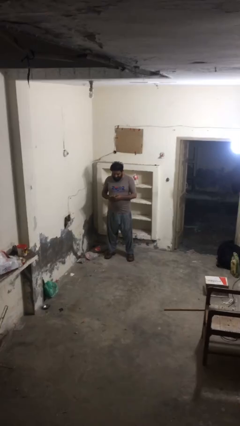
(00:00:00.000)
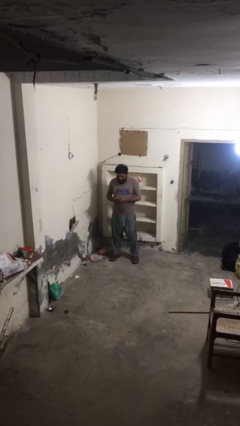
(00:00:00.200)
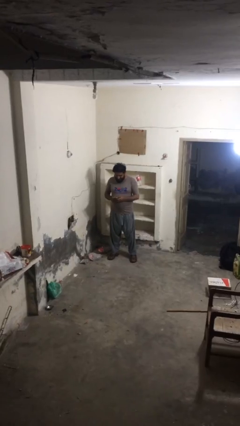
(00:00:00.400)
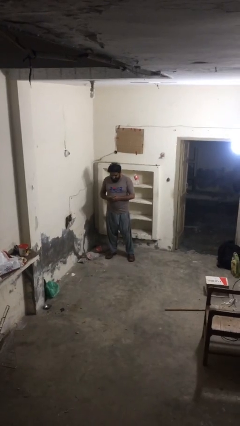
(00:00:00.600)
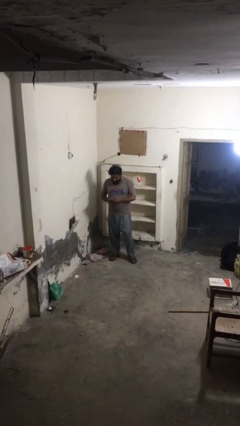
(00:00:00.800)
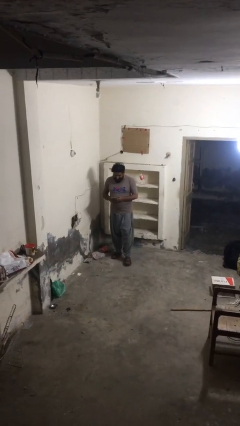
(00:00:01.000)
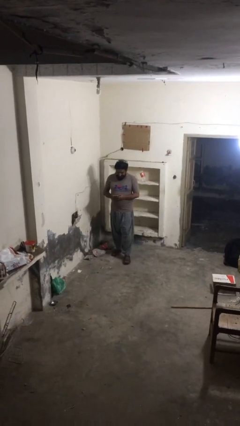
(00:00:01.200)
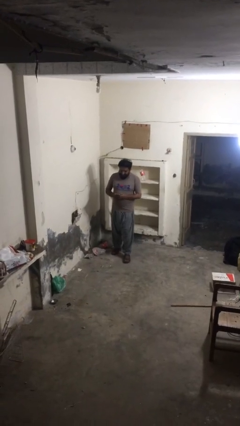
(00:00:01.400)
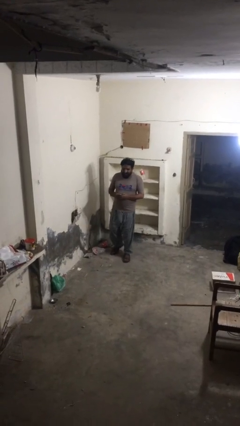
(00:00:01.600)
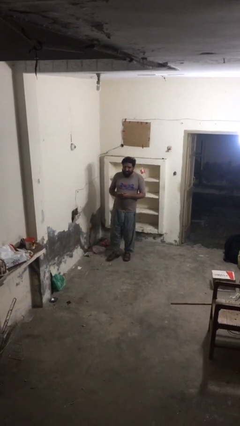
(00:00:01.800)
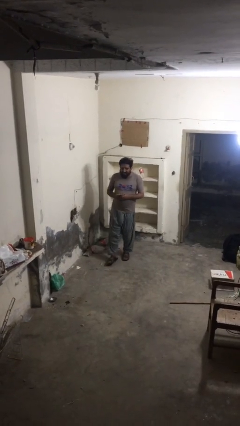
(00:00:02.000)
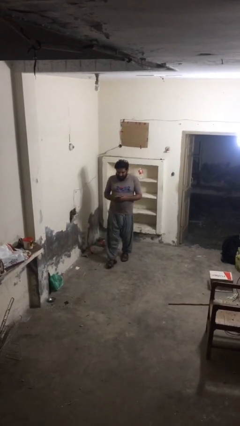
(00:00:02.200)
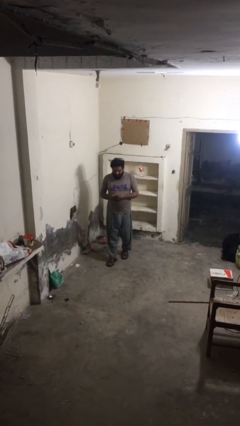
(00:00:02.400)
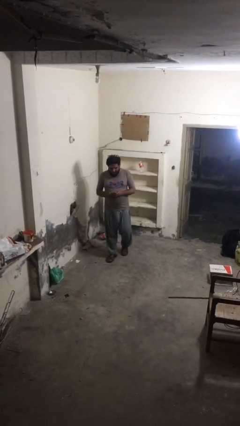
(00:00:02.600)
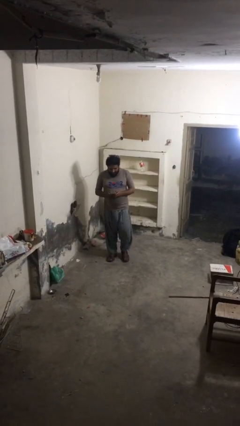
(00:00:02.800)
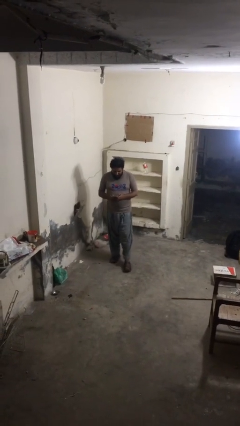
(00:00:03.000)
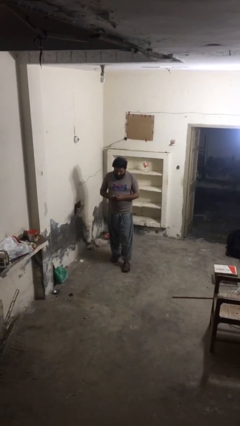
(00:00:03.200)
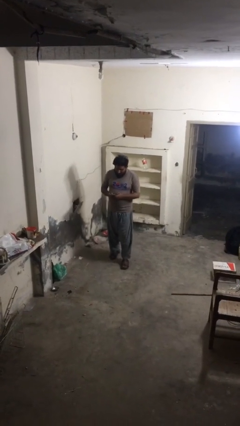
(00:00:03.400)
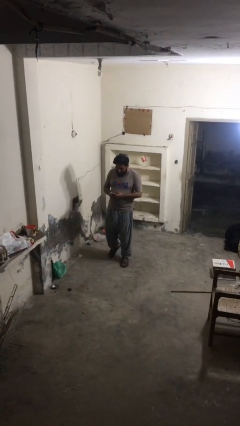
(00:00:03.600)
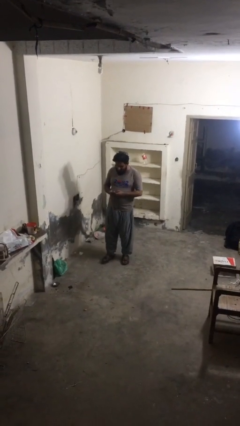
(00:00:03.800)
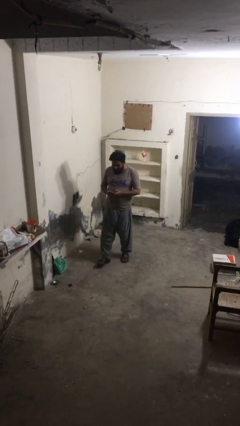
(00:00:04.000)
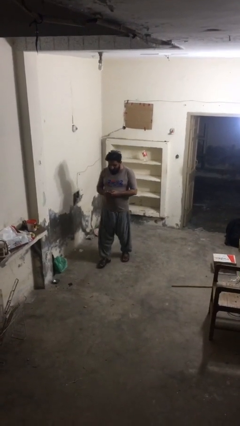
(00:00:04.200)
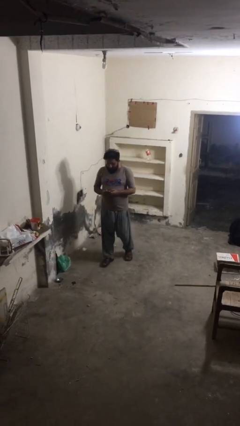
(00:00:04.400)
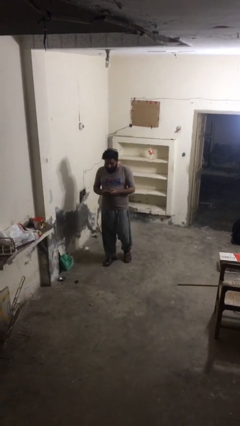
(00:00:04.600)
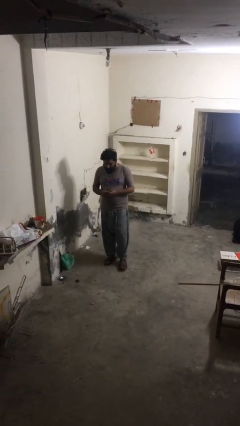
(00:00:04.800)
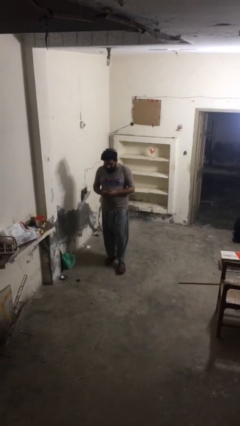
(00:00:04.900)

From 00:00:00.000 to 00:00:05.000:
person texts on phone

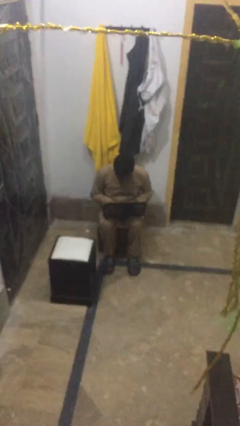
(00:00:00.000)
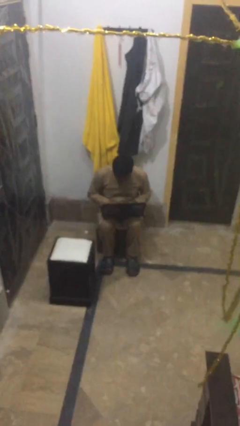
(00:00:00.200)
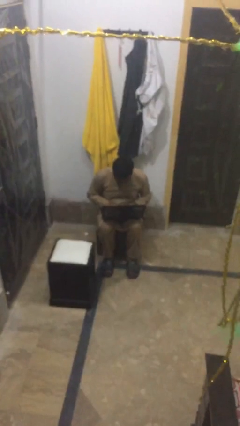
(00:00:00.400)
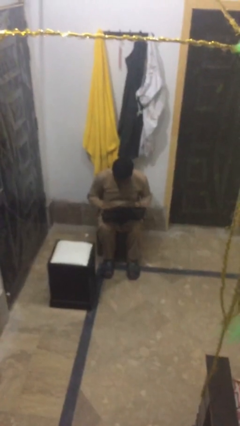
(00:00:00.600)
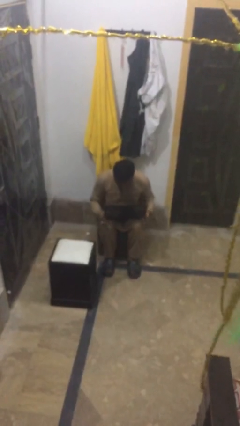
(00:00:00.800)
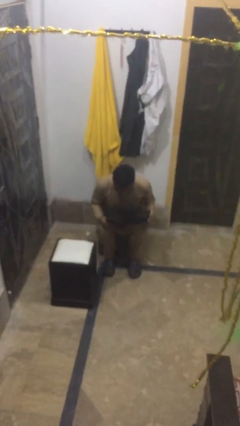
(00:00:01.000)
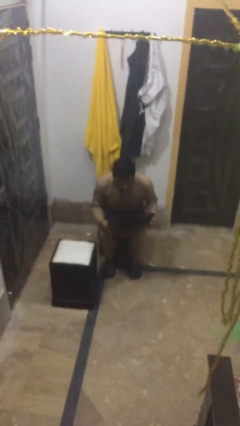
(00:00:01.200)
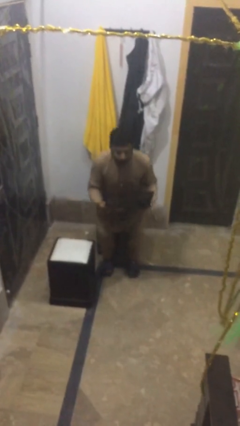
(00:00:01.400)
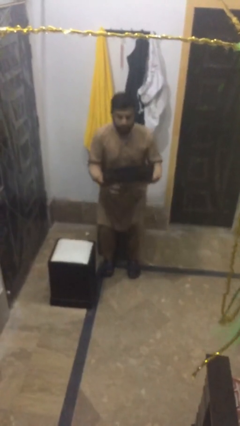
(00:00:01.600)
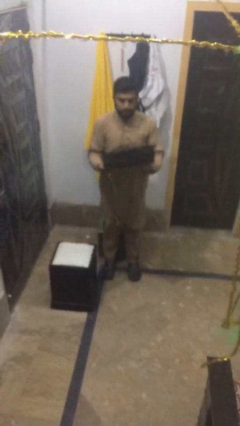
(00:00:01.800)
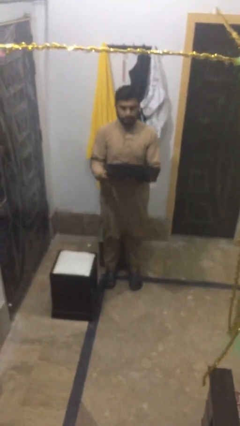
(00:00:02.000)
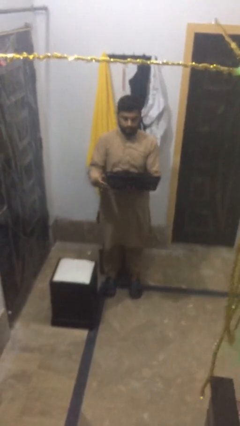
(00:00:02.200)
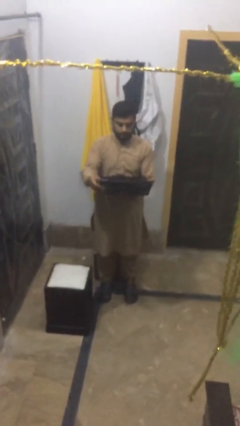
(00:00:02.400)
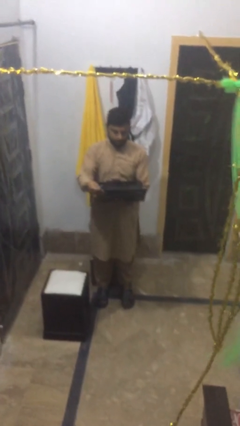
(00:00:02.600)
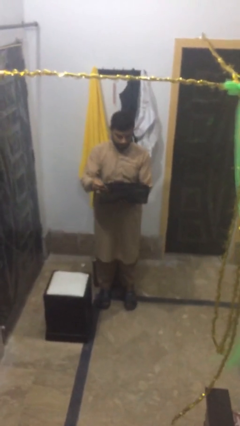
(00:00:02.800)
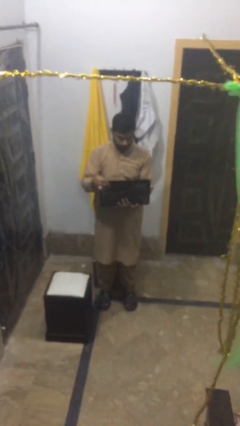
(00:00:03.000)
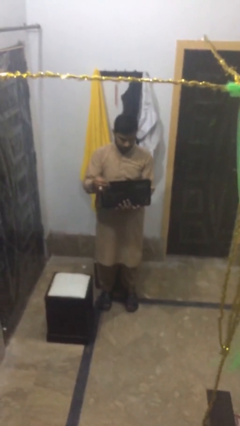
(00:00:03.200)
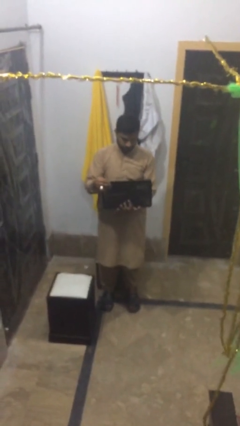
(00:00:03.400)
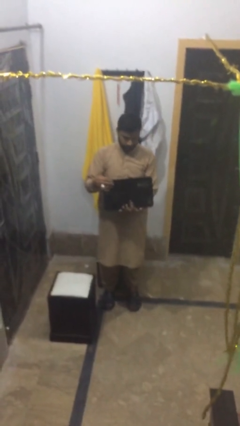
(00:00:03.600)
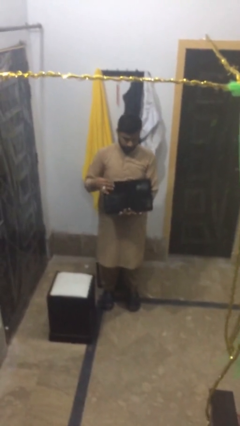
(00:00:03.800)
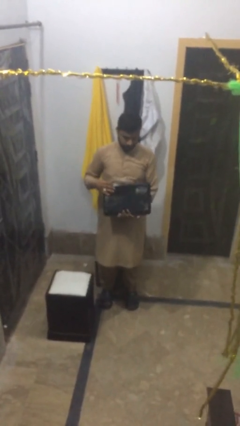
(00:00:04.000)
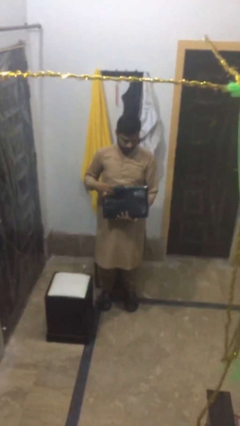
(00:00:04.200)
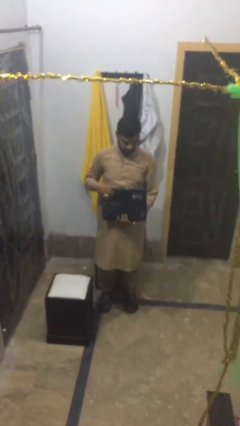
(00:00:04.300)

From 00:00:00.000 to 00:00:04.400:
person stands up

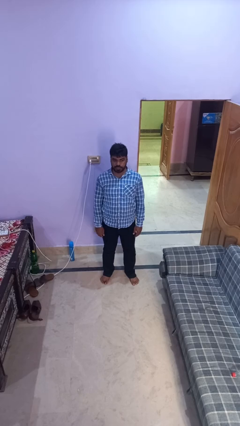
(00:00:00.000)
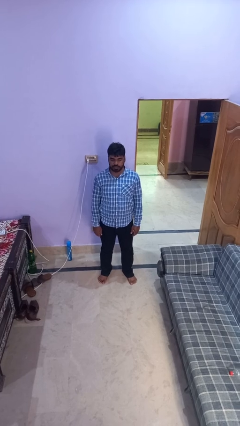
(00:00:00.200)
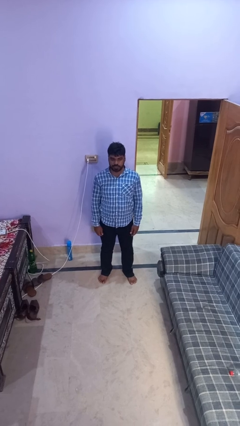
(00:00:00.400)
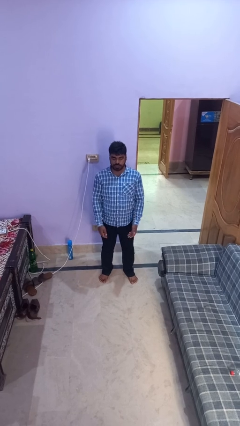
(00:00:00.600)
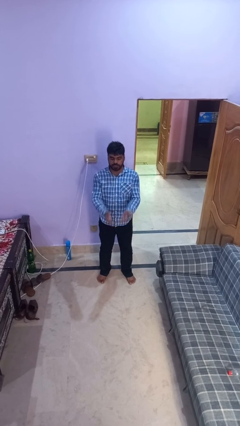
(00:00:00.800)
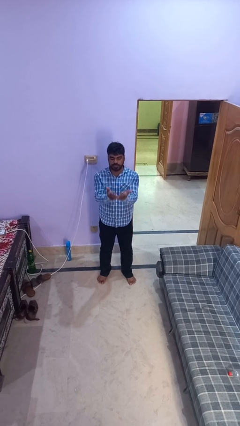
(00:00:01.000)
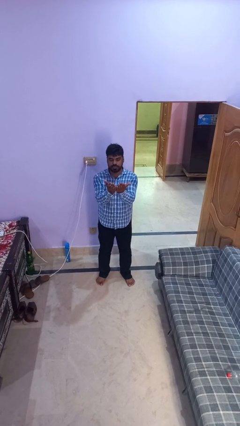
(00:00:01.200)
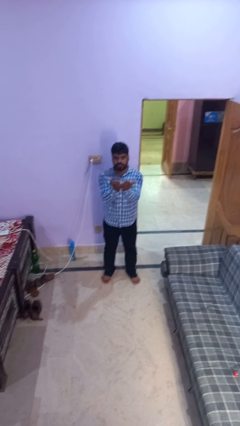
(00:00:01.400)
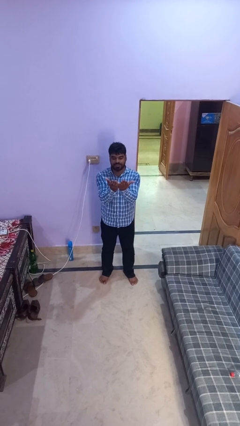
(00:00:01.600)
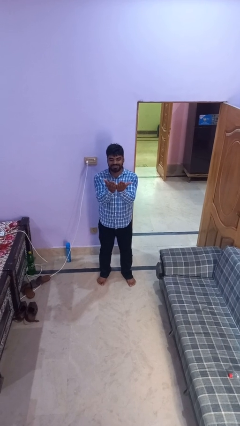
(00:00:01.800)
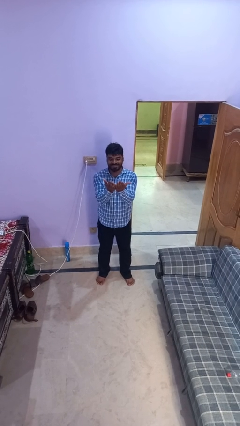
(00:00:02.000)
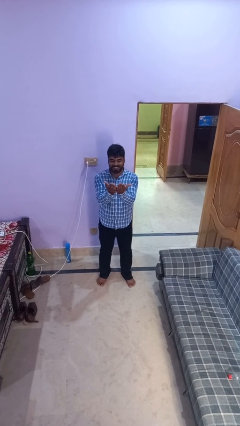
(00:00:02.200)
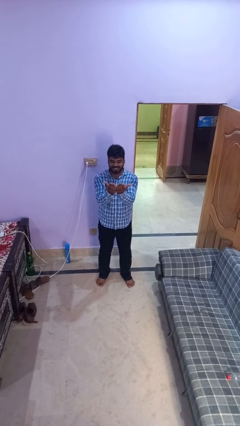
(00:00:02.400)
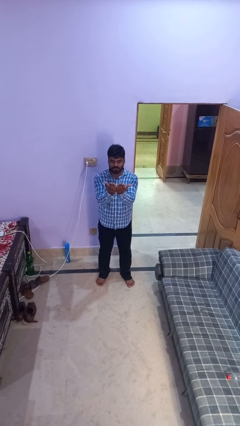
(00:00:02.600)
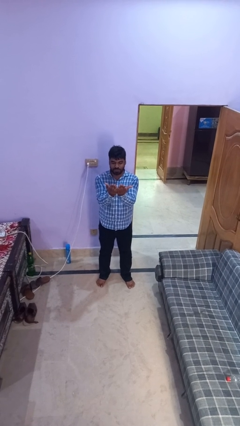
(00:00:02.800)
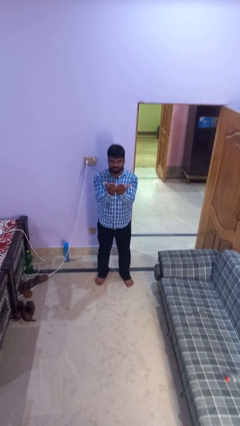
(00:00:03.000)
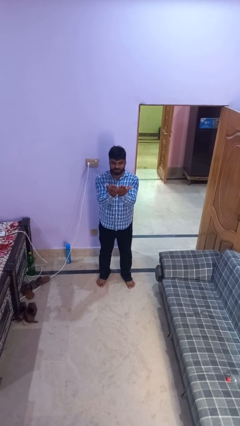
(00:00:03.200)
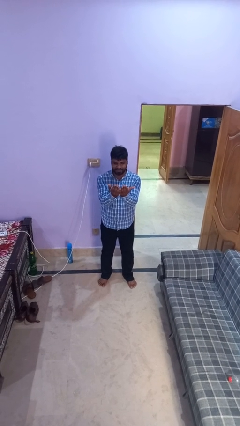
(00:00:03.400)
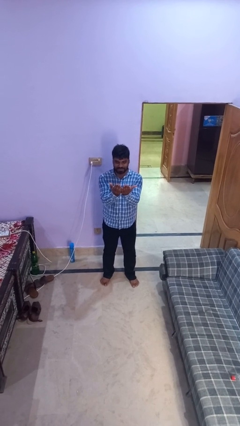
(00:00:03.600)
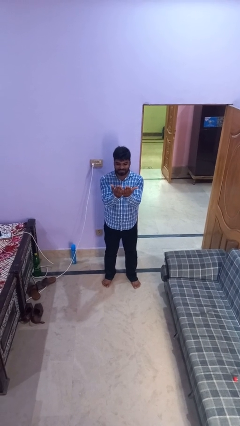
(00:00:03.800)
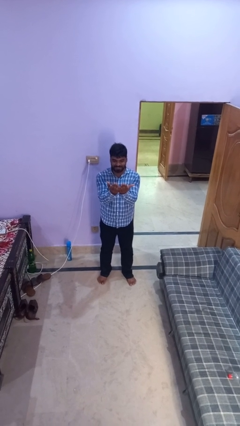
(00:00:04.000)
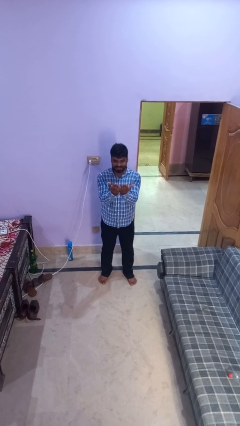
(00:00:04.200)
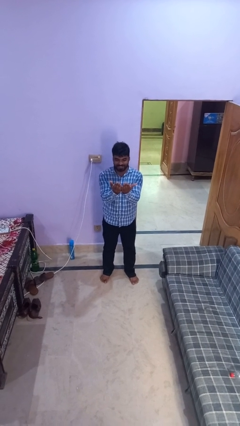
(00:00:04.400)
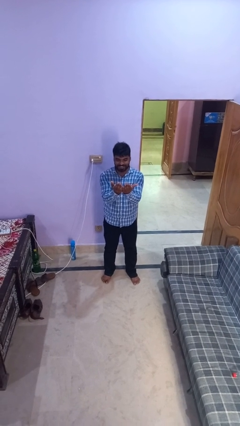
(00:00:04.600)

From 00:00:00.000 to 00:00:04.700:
person prays

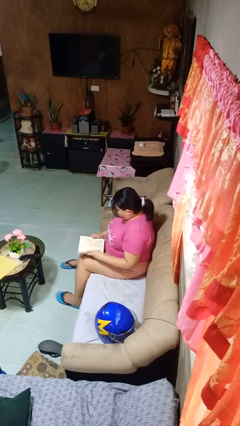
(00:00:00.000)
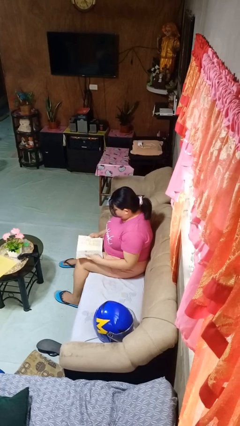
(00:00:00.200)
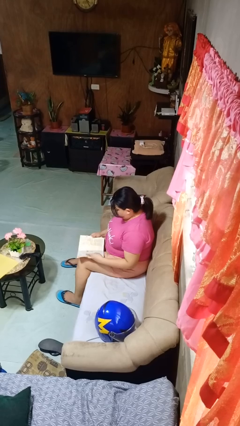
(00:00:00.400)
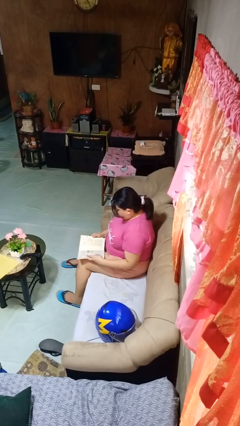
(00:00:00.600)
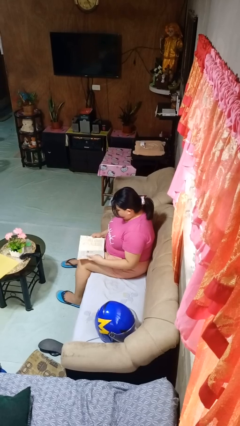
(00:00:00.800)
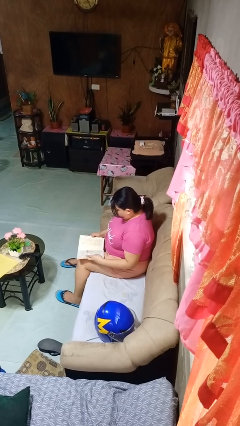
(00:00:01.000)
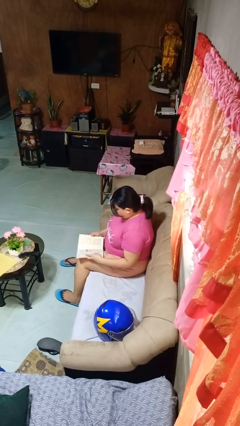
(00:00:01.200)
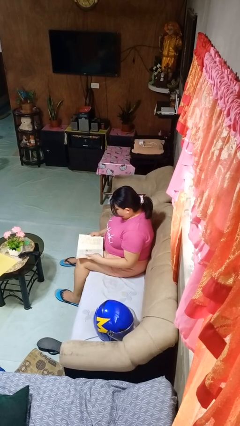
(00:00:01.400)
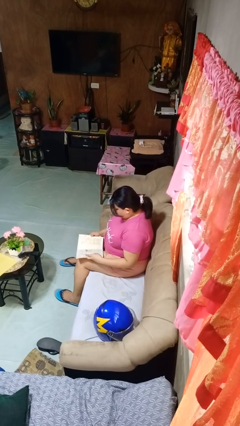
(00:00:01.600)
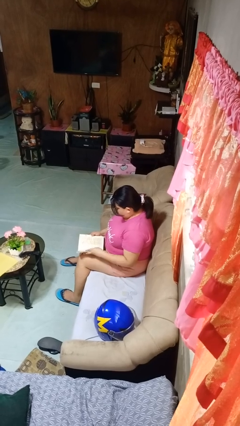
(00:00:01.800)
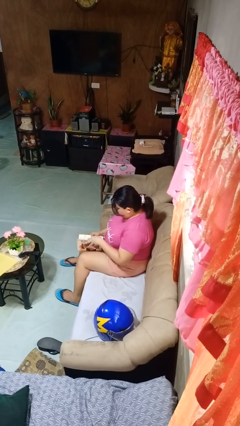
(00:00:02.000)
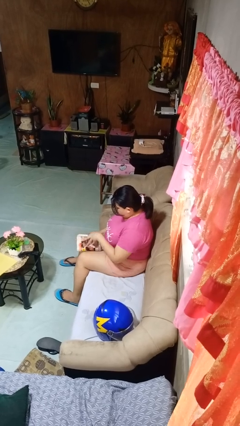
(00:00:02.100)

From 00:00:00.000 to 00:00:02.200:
person reads book
